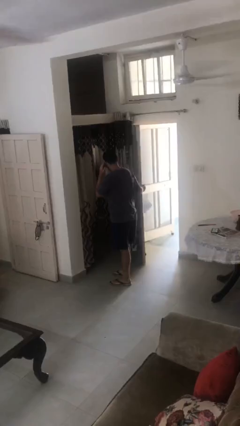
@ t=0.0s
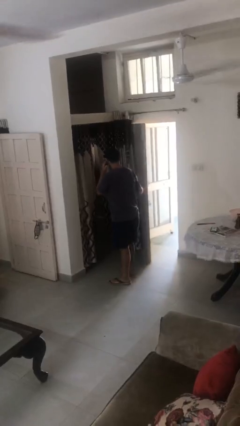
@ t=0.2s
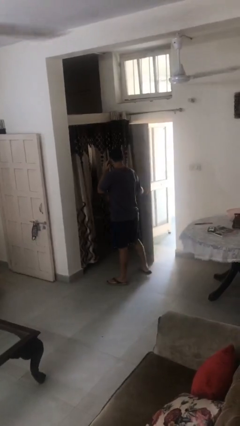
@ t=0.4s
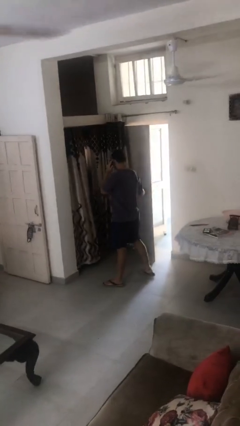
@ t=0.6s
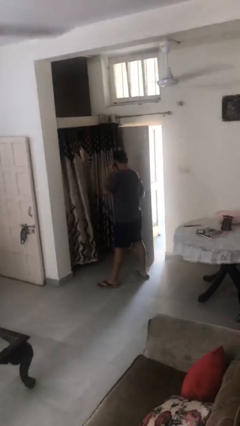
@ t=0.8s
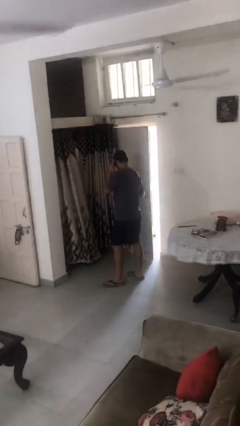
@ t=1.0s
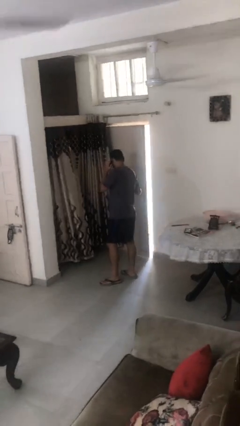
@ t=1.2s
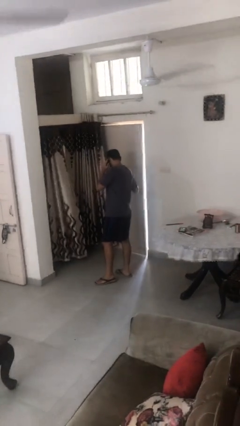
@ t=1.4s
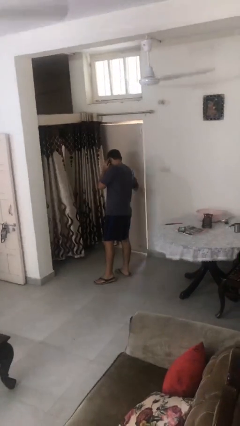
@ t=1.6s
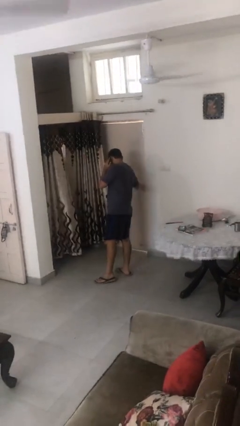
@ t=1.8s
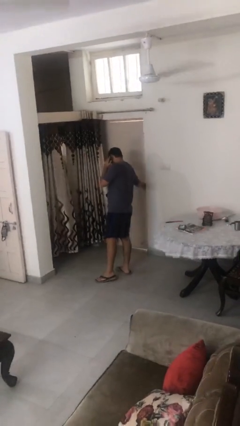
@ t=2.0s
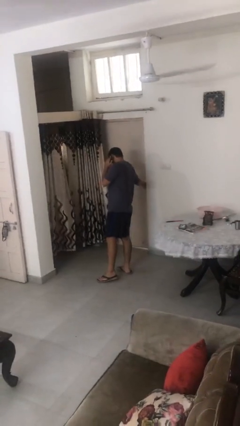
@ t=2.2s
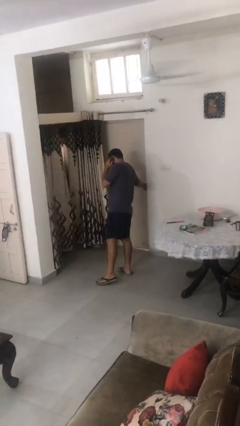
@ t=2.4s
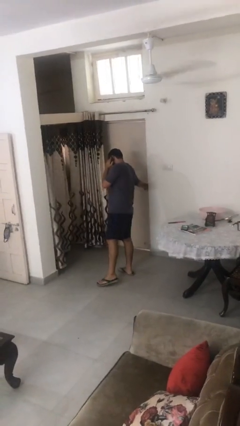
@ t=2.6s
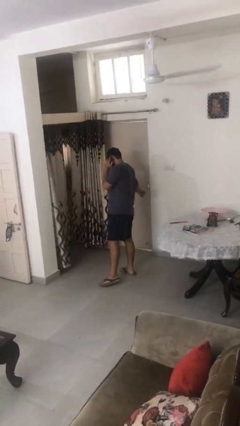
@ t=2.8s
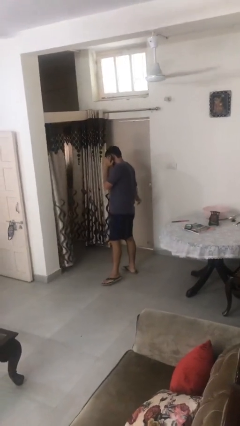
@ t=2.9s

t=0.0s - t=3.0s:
person closes facility door

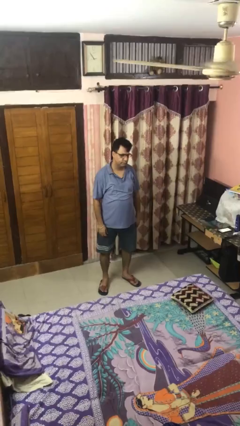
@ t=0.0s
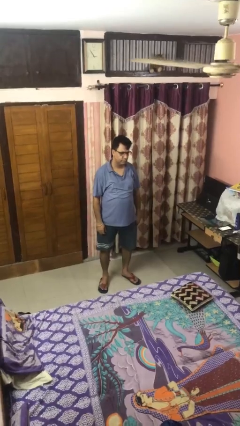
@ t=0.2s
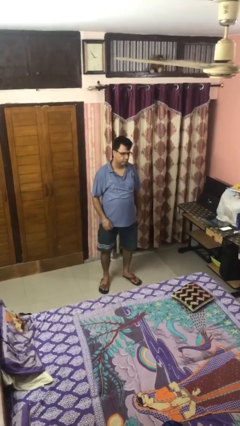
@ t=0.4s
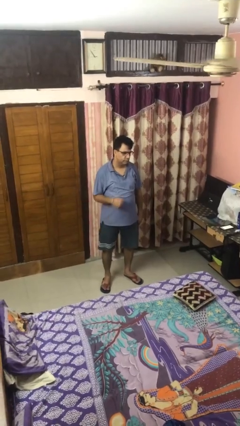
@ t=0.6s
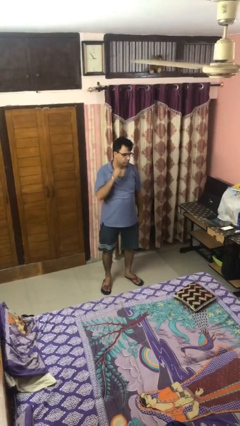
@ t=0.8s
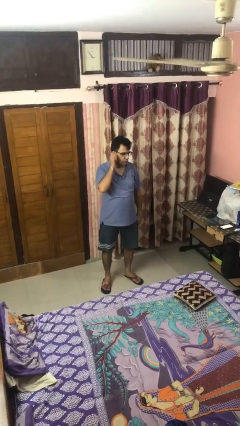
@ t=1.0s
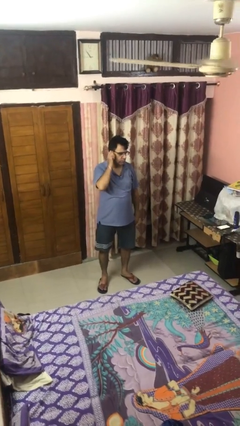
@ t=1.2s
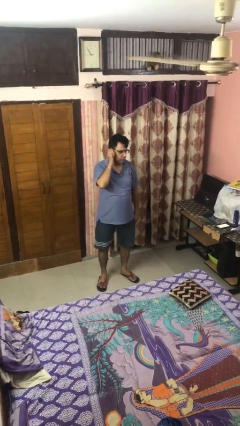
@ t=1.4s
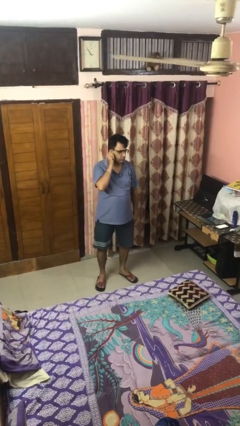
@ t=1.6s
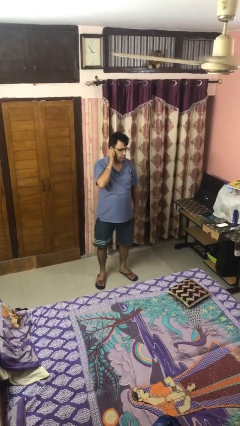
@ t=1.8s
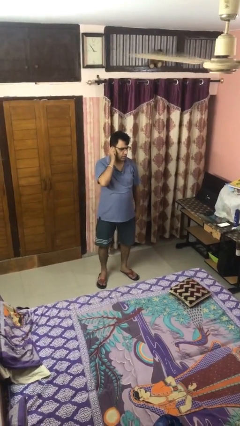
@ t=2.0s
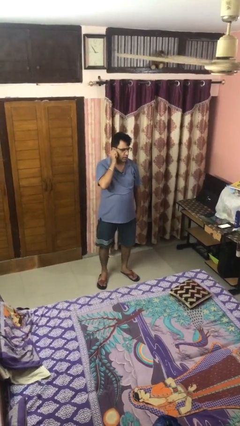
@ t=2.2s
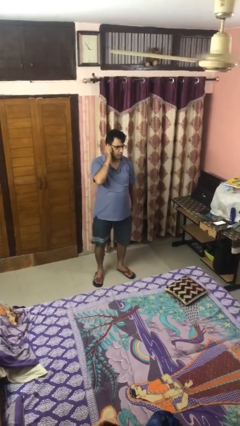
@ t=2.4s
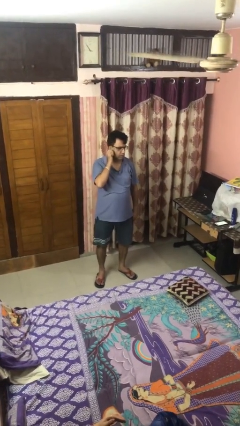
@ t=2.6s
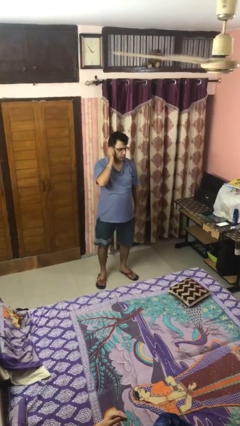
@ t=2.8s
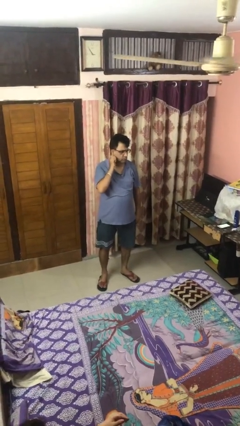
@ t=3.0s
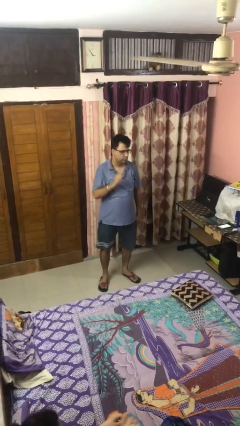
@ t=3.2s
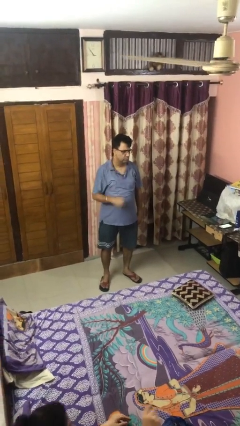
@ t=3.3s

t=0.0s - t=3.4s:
person touches earlobe

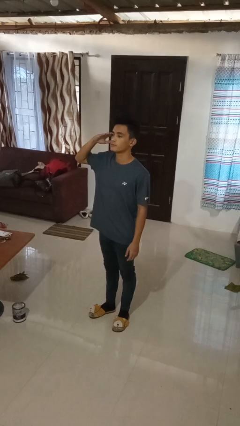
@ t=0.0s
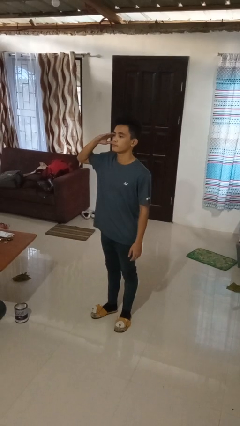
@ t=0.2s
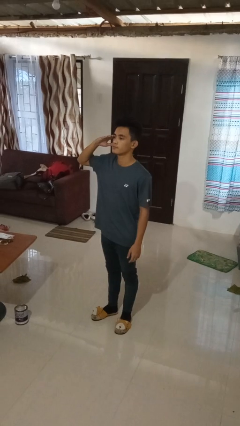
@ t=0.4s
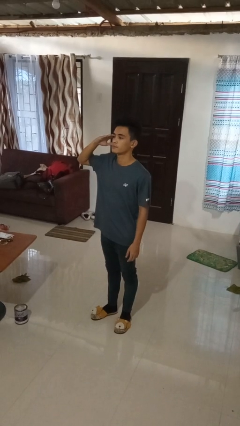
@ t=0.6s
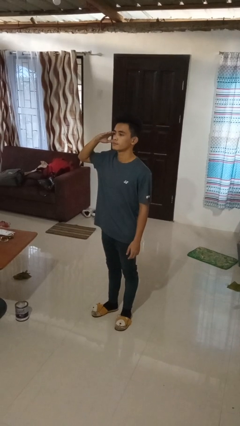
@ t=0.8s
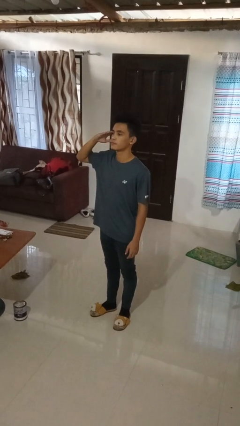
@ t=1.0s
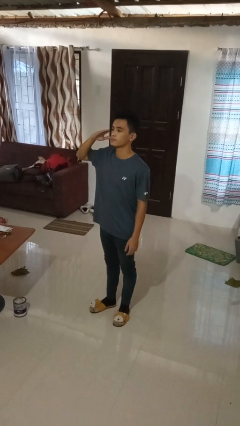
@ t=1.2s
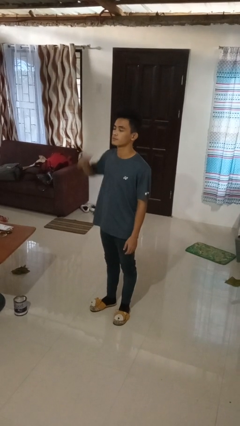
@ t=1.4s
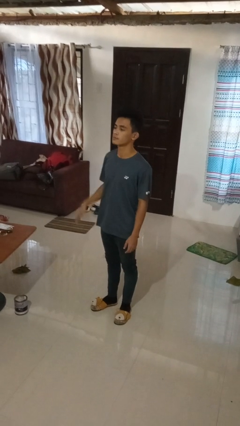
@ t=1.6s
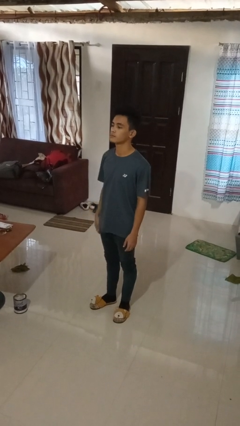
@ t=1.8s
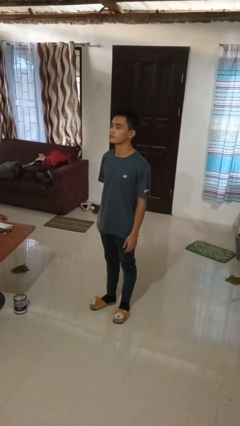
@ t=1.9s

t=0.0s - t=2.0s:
person salutes

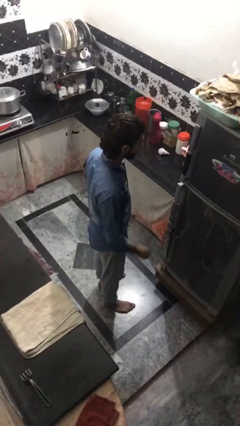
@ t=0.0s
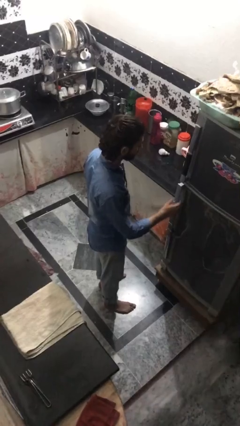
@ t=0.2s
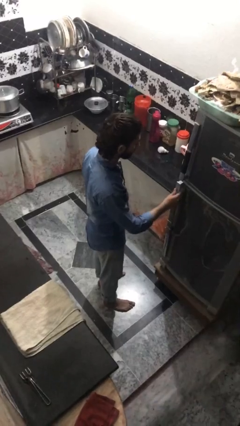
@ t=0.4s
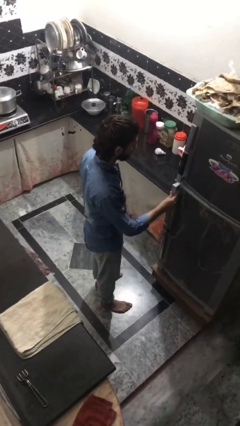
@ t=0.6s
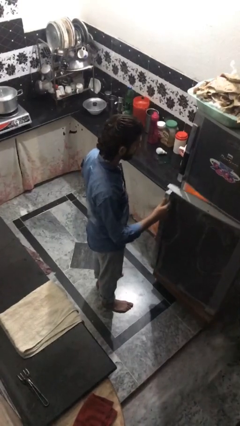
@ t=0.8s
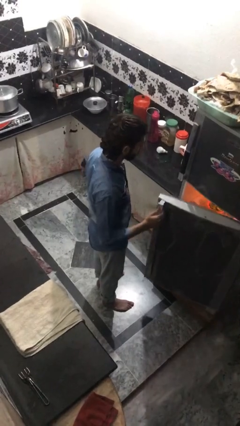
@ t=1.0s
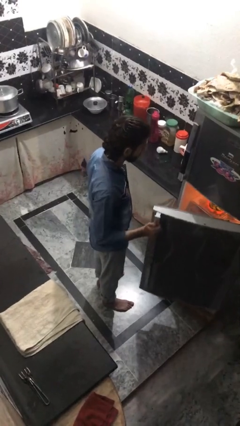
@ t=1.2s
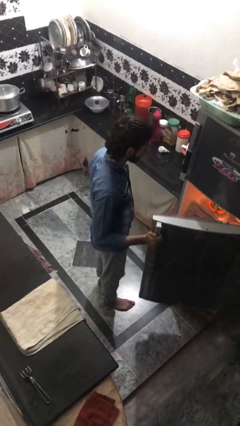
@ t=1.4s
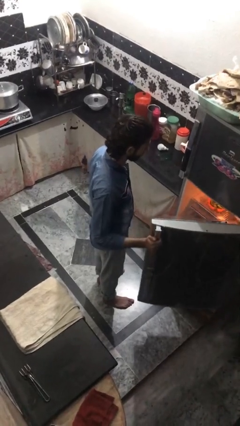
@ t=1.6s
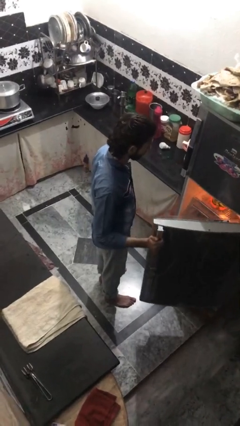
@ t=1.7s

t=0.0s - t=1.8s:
person opens refrigerator

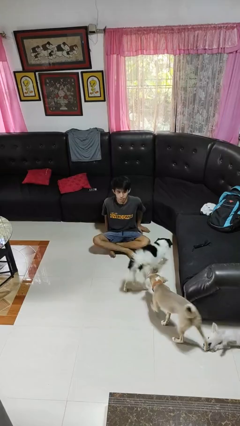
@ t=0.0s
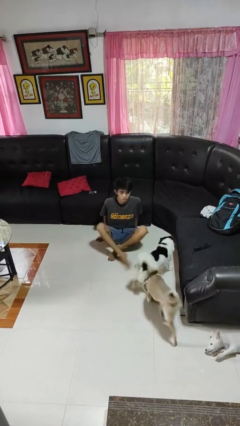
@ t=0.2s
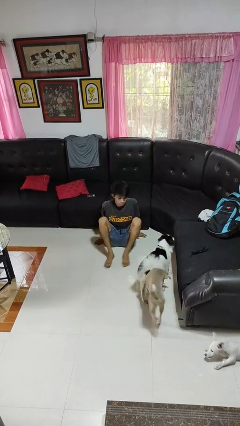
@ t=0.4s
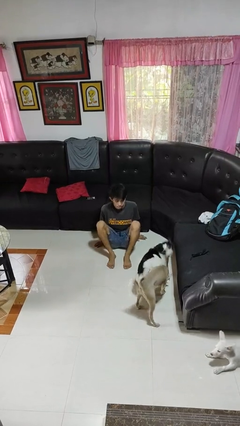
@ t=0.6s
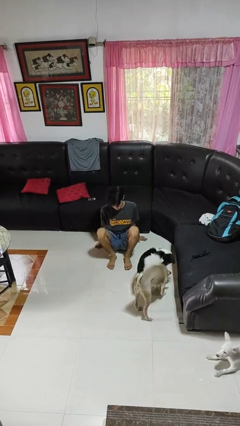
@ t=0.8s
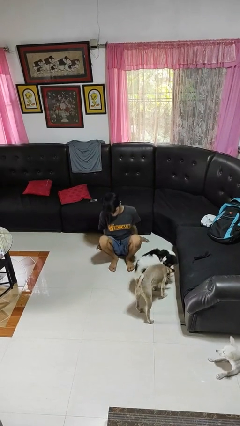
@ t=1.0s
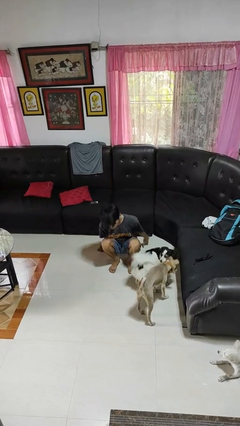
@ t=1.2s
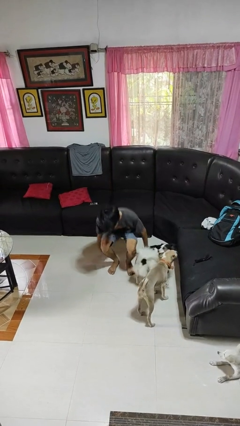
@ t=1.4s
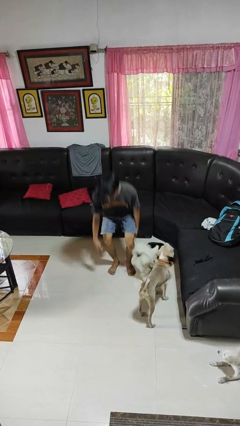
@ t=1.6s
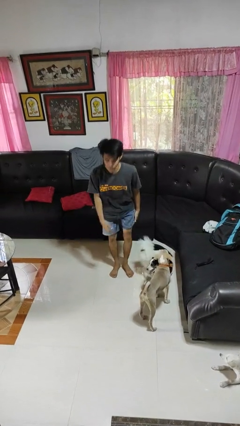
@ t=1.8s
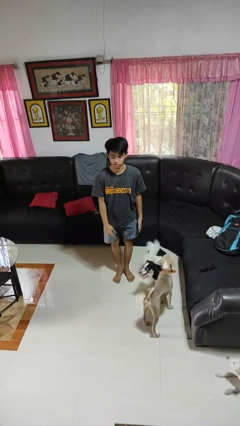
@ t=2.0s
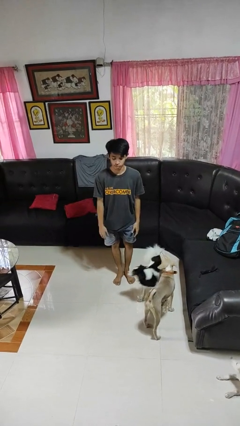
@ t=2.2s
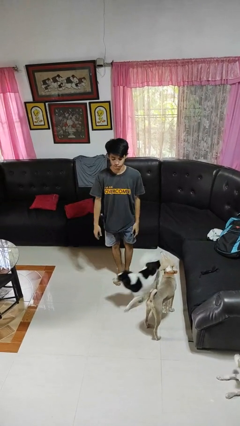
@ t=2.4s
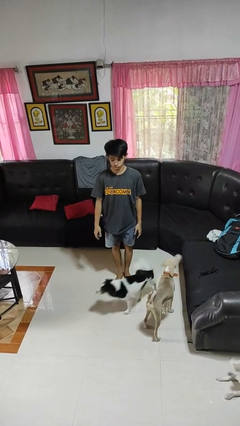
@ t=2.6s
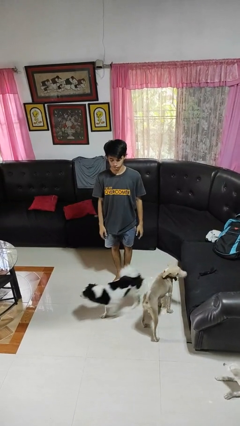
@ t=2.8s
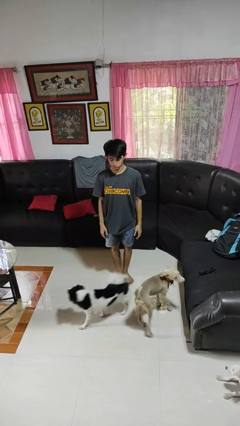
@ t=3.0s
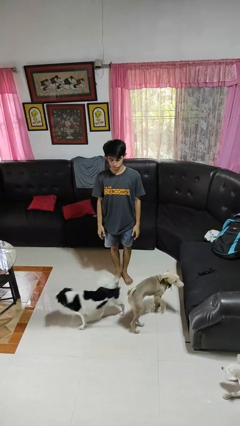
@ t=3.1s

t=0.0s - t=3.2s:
person stands up from floor

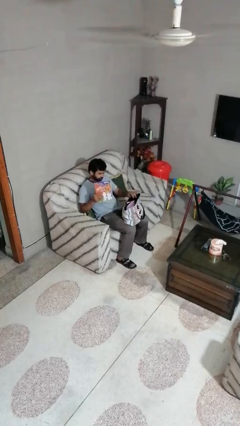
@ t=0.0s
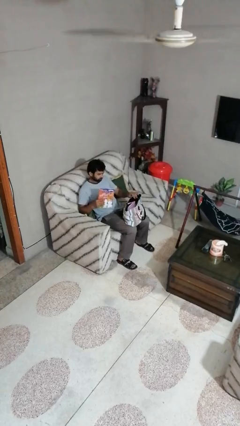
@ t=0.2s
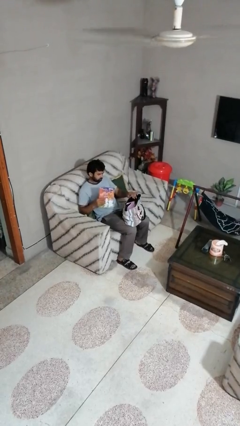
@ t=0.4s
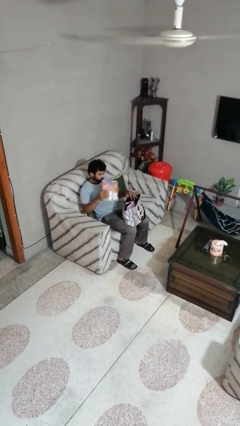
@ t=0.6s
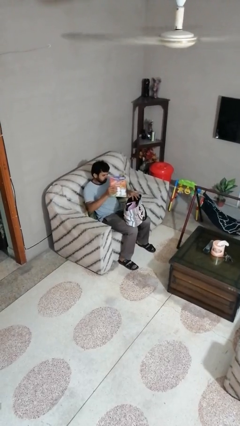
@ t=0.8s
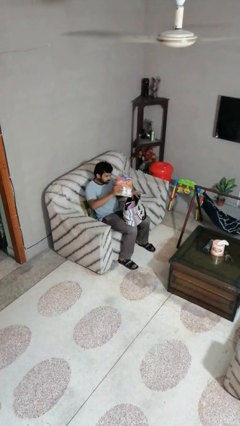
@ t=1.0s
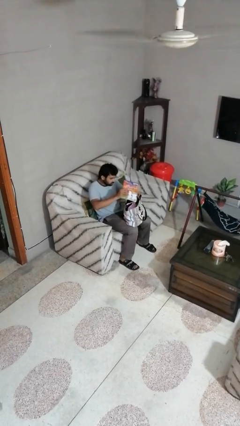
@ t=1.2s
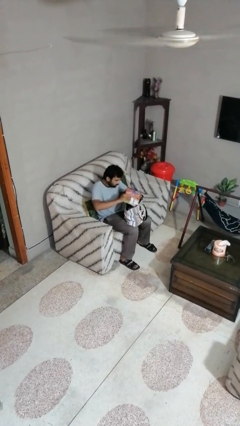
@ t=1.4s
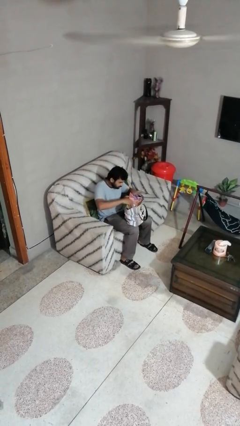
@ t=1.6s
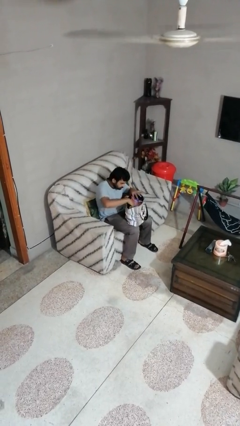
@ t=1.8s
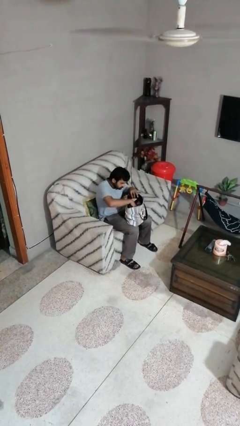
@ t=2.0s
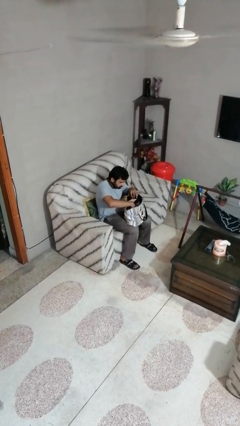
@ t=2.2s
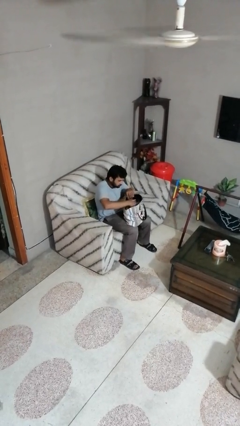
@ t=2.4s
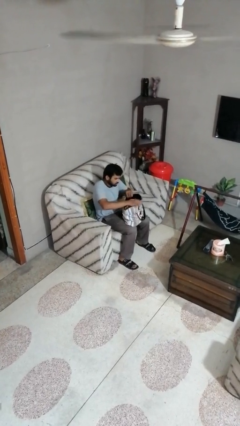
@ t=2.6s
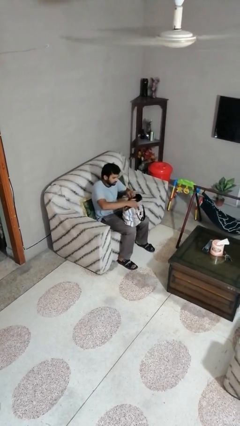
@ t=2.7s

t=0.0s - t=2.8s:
person puts object into backpack

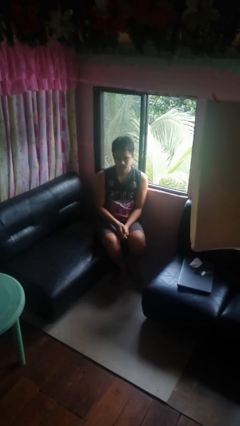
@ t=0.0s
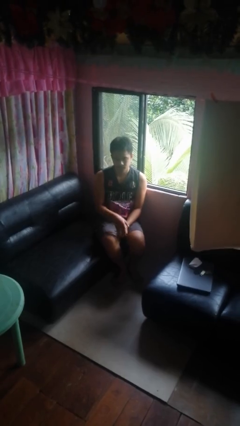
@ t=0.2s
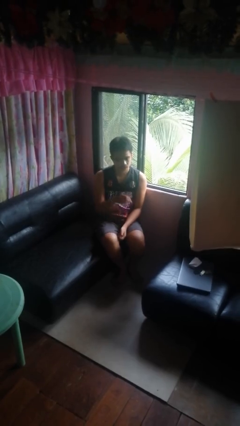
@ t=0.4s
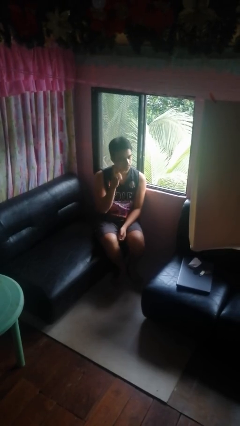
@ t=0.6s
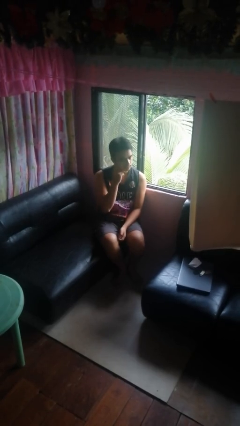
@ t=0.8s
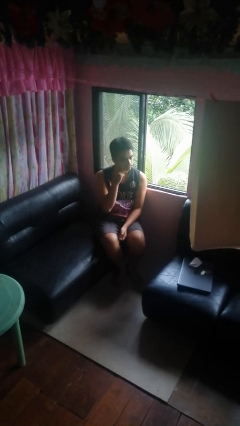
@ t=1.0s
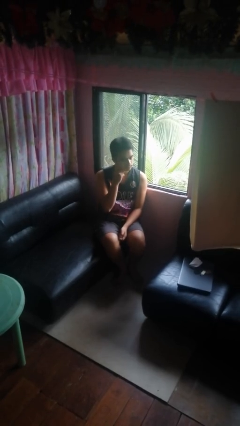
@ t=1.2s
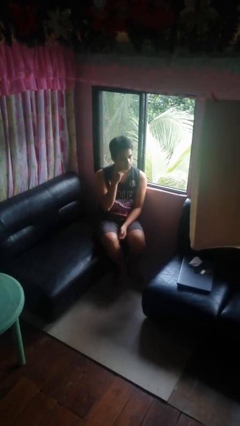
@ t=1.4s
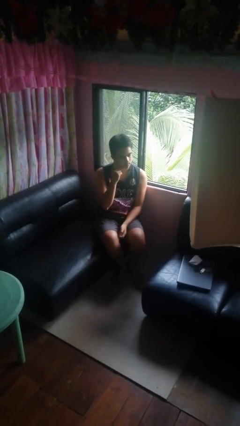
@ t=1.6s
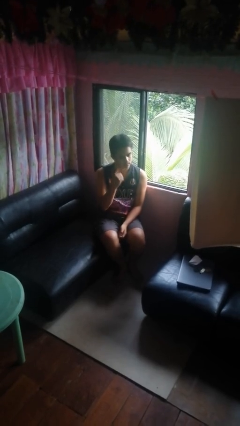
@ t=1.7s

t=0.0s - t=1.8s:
person gestures listen closely
